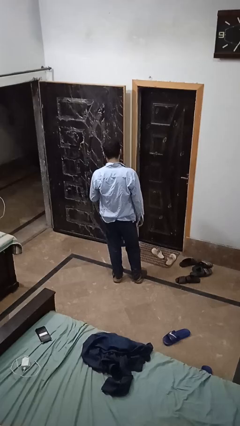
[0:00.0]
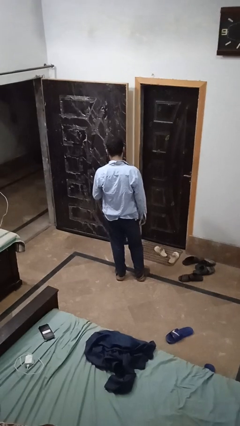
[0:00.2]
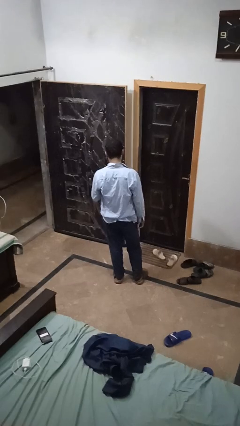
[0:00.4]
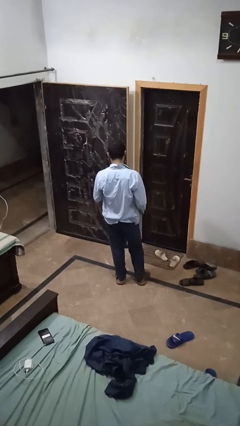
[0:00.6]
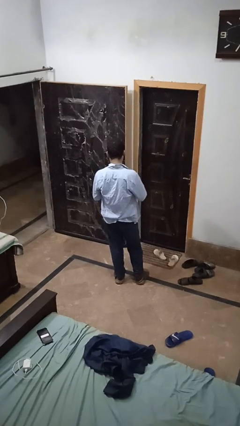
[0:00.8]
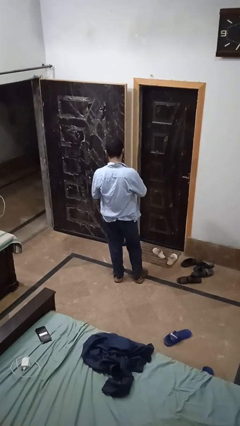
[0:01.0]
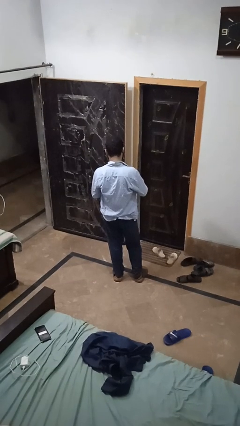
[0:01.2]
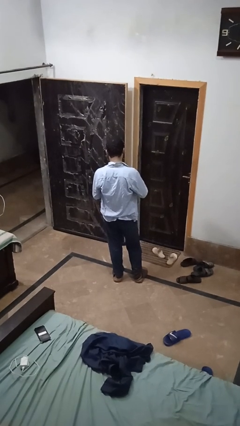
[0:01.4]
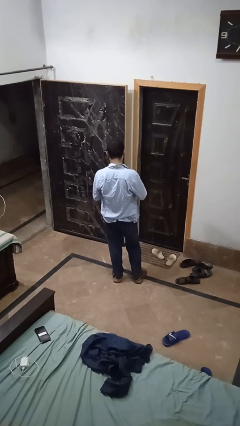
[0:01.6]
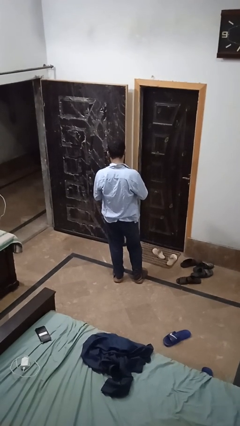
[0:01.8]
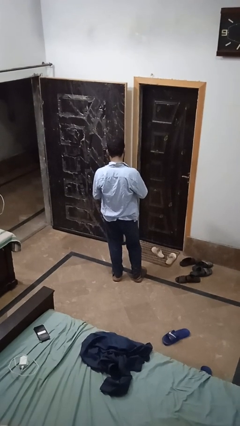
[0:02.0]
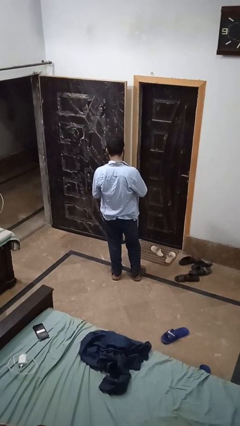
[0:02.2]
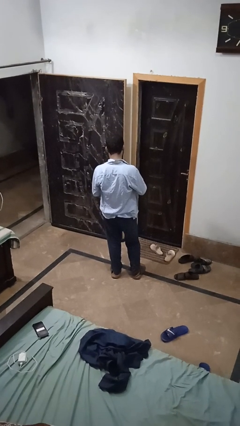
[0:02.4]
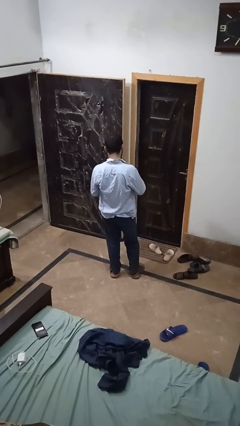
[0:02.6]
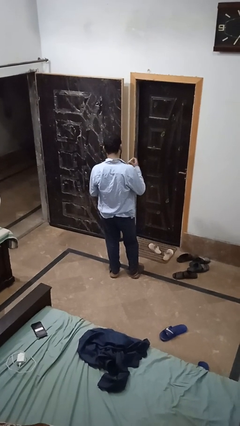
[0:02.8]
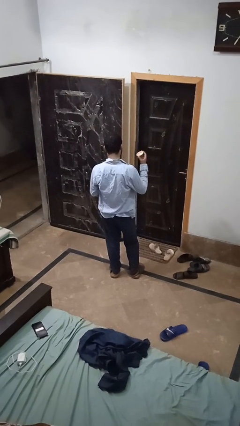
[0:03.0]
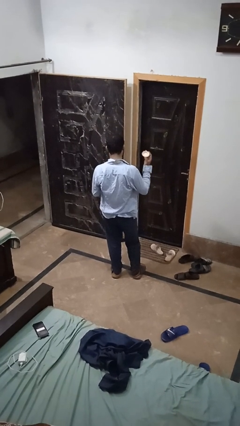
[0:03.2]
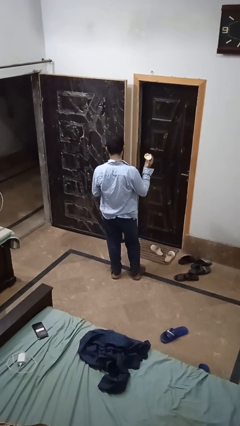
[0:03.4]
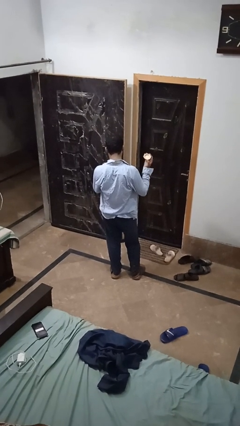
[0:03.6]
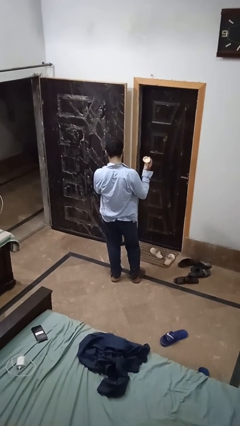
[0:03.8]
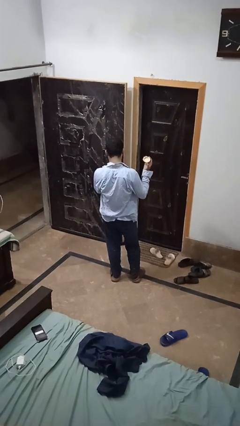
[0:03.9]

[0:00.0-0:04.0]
person opens jar

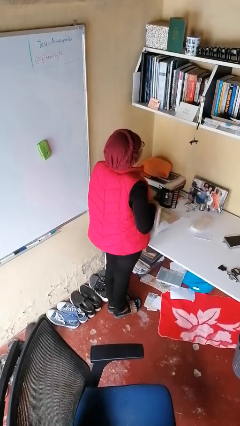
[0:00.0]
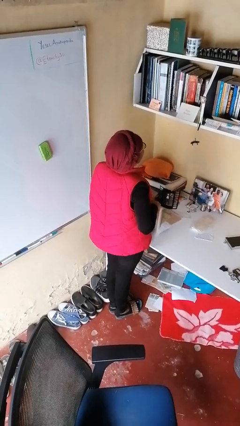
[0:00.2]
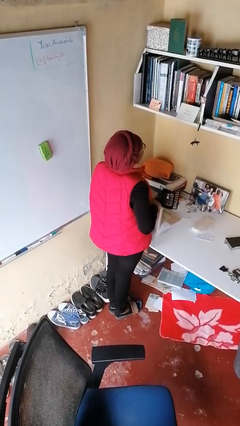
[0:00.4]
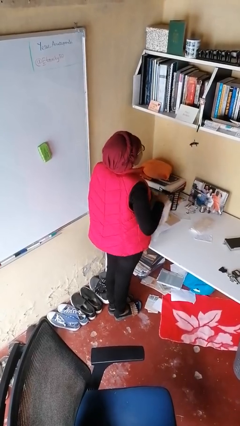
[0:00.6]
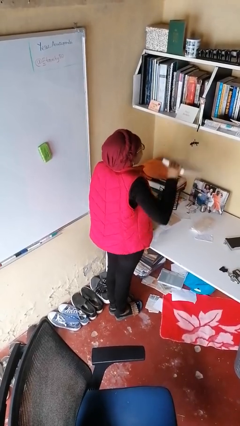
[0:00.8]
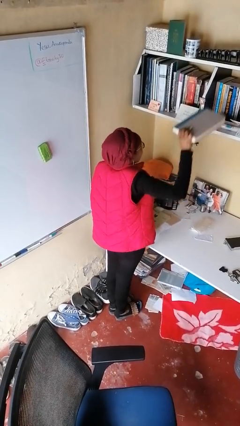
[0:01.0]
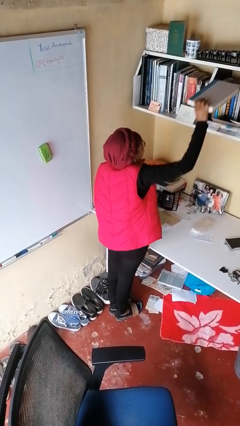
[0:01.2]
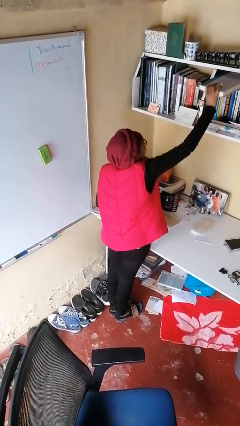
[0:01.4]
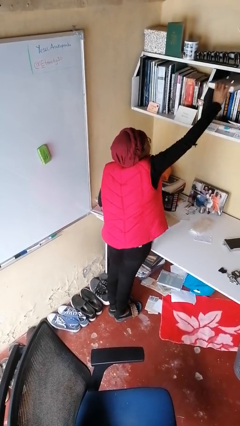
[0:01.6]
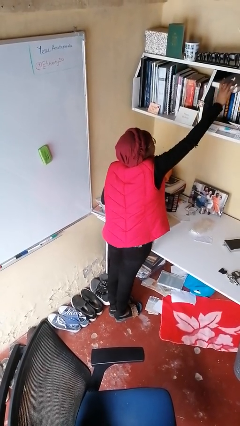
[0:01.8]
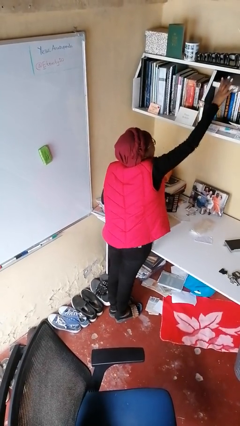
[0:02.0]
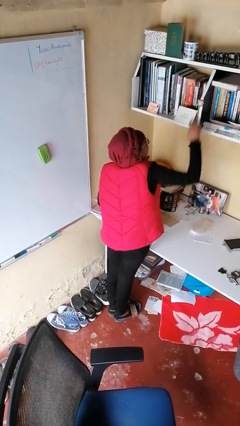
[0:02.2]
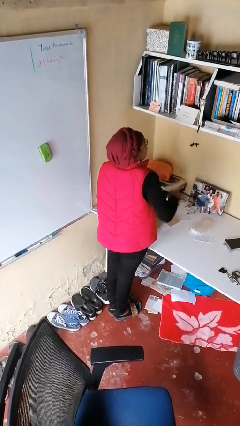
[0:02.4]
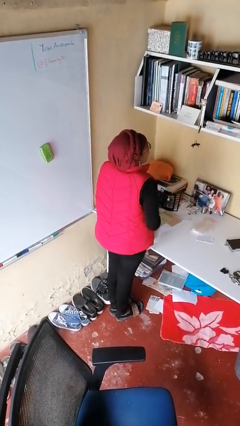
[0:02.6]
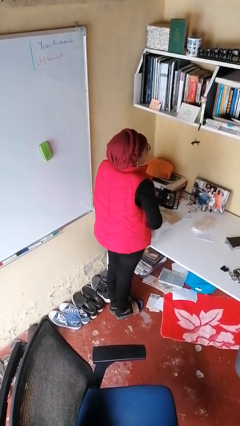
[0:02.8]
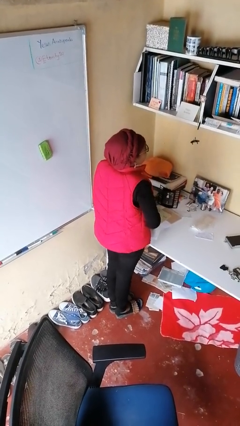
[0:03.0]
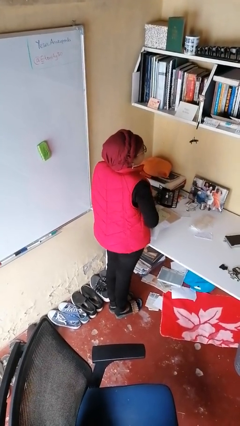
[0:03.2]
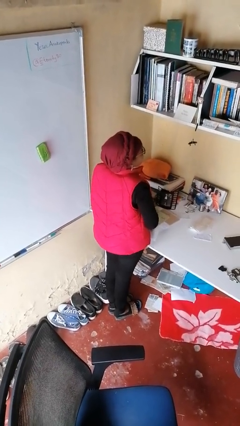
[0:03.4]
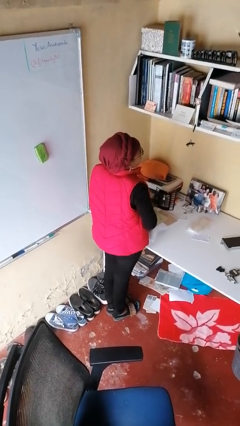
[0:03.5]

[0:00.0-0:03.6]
person puts down object on shelf

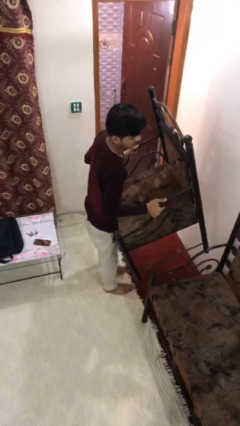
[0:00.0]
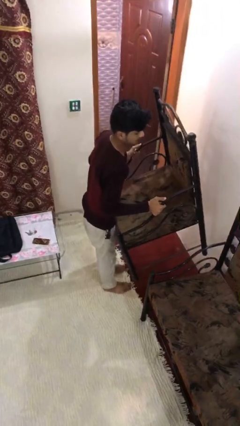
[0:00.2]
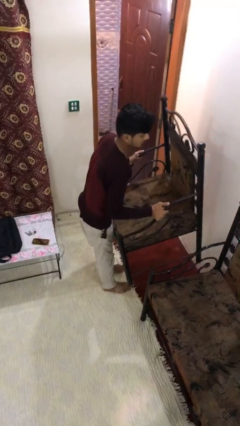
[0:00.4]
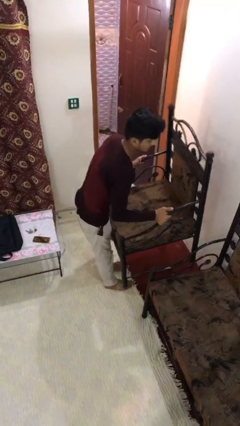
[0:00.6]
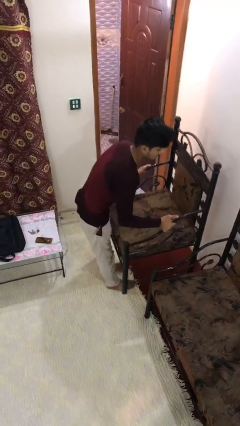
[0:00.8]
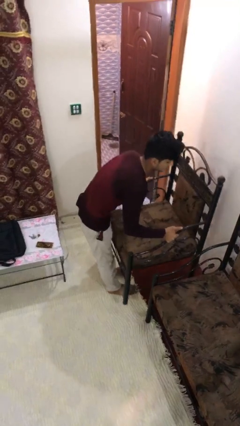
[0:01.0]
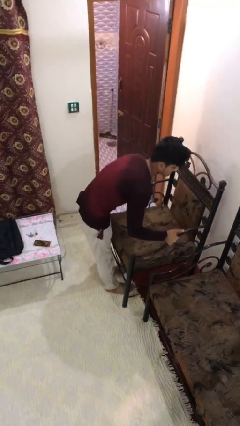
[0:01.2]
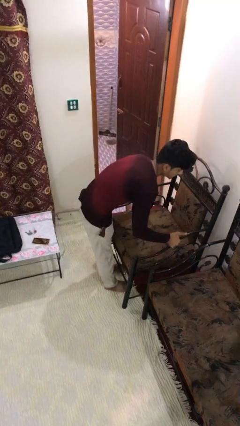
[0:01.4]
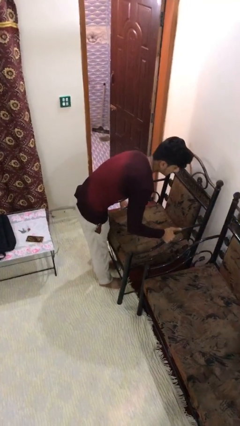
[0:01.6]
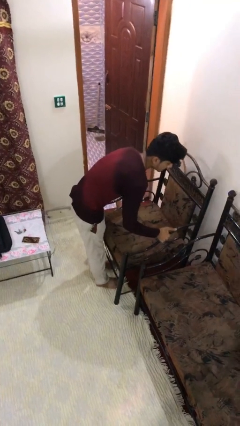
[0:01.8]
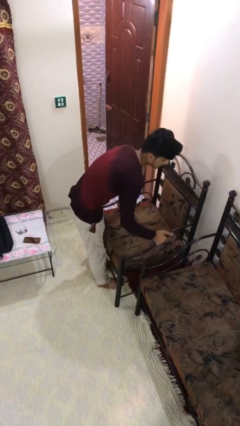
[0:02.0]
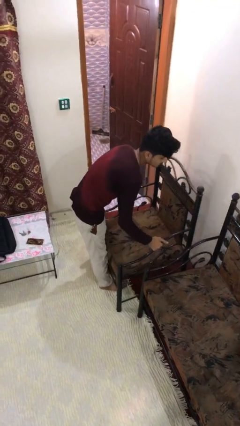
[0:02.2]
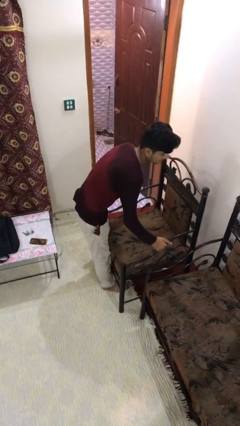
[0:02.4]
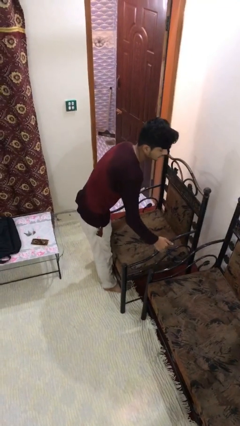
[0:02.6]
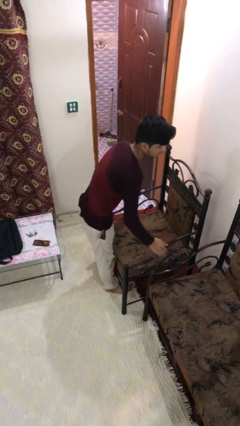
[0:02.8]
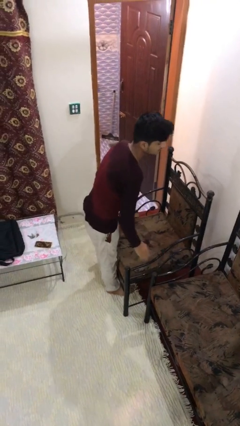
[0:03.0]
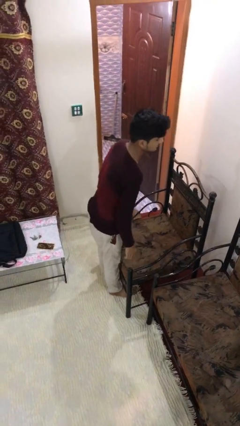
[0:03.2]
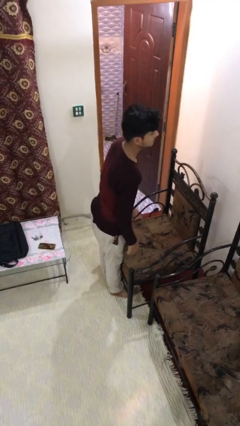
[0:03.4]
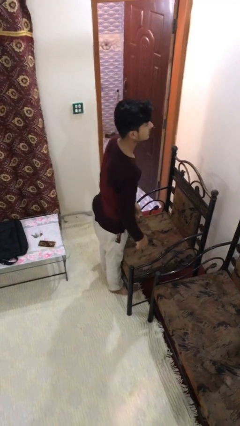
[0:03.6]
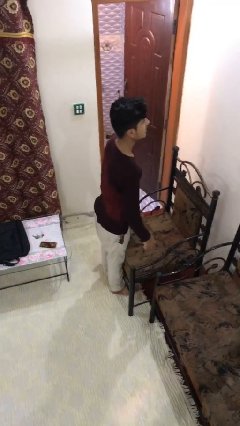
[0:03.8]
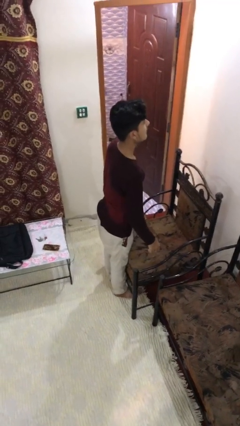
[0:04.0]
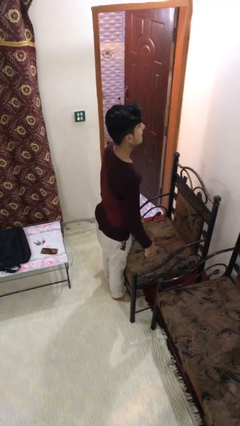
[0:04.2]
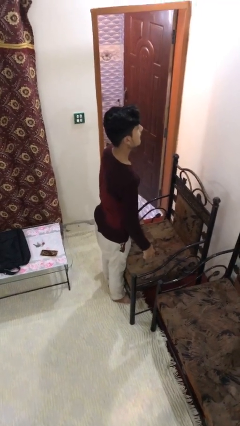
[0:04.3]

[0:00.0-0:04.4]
person puts down object on floor

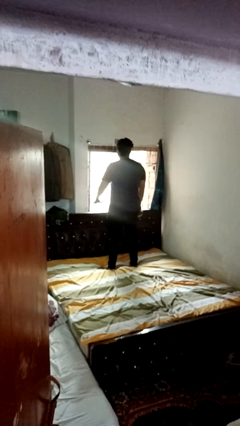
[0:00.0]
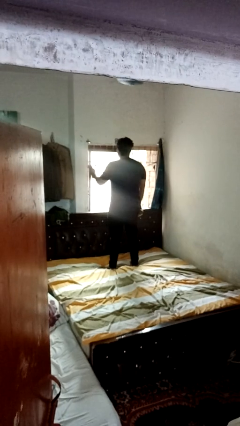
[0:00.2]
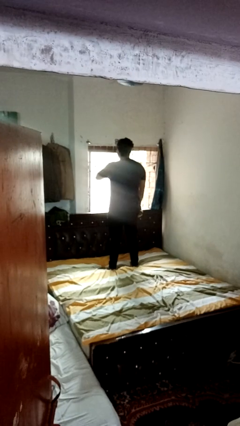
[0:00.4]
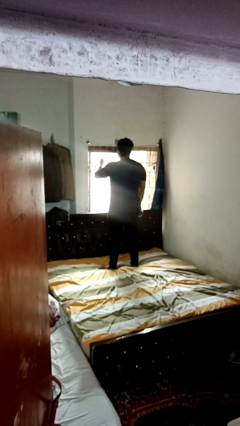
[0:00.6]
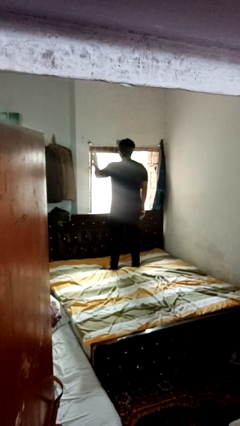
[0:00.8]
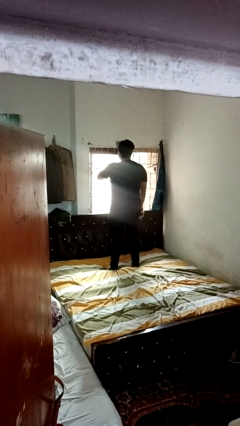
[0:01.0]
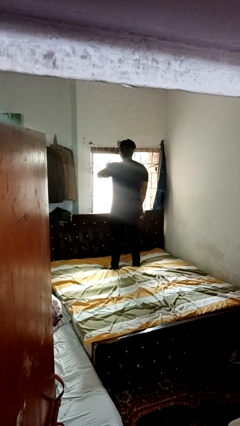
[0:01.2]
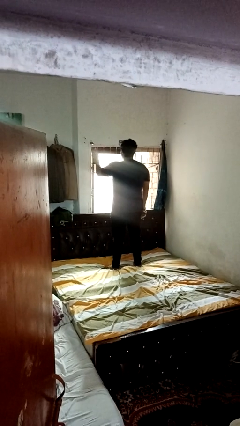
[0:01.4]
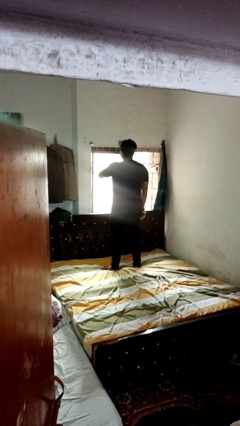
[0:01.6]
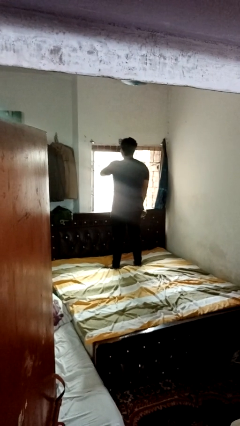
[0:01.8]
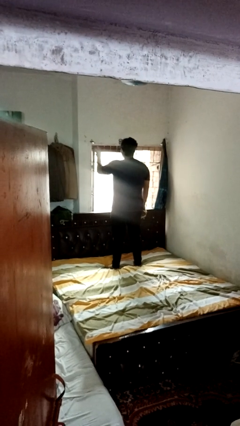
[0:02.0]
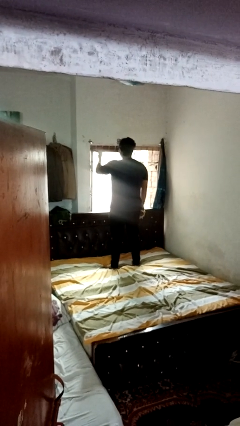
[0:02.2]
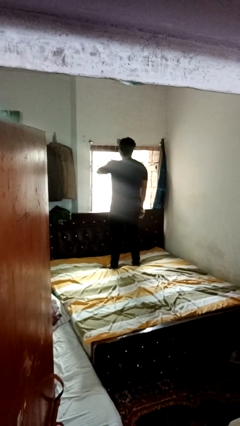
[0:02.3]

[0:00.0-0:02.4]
person sprays from bottle

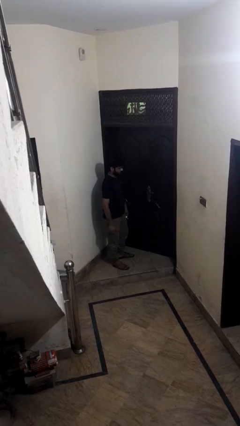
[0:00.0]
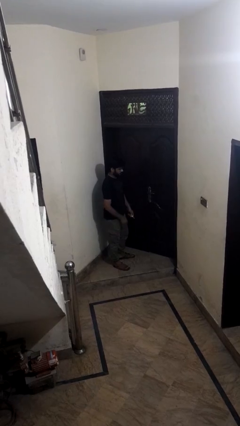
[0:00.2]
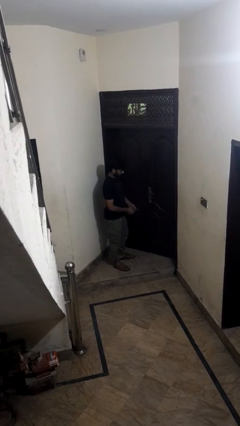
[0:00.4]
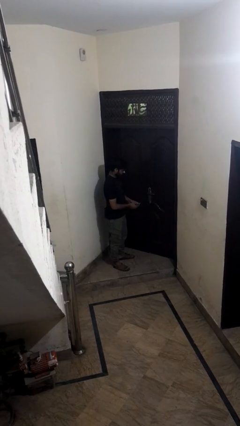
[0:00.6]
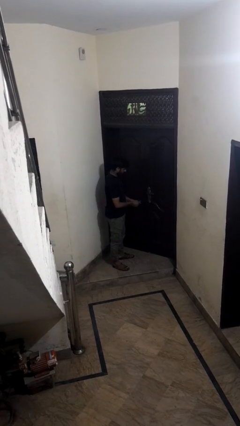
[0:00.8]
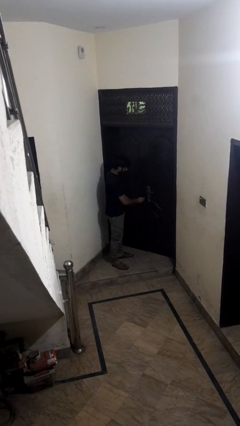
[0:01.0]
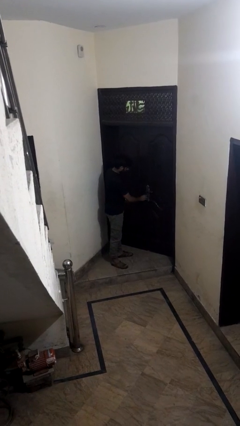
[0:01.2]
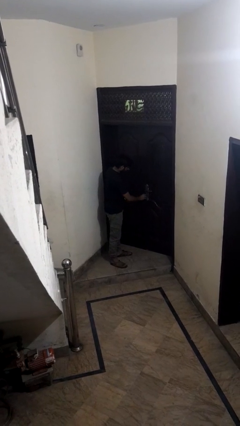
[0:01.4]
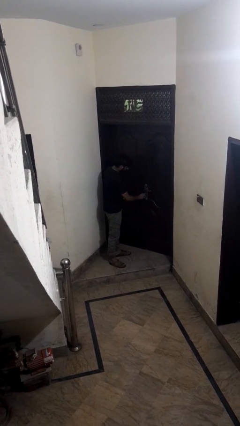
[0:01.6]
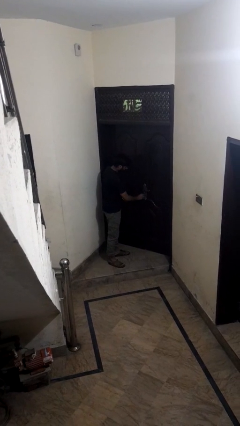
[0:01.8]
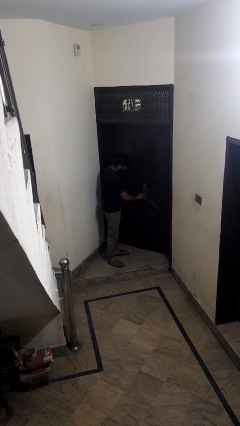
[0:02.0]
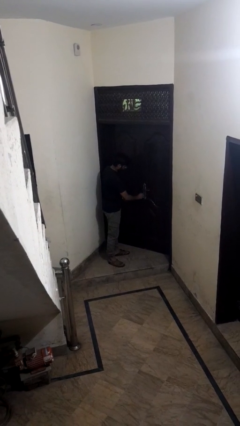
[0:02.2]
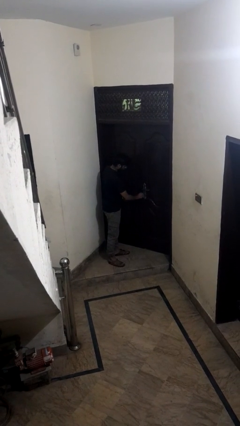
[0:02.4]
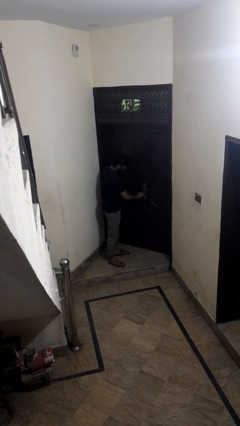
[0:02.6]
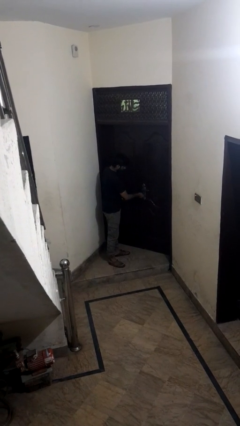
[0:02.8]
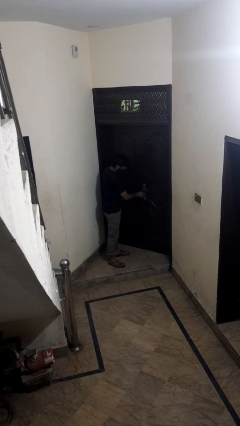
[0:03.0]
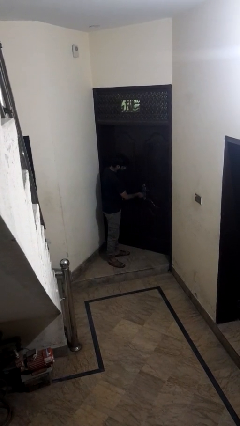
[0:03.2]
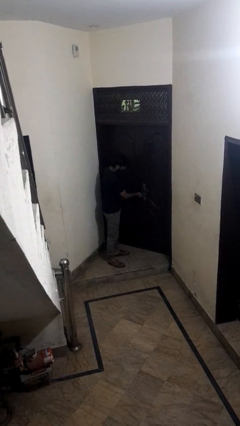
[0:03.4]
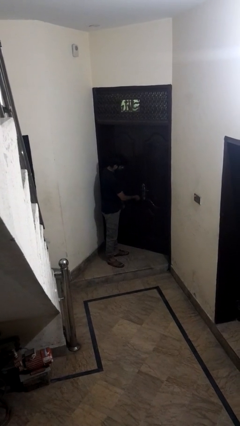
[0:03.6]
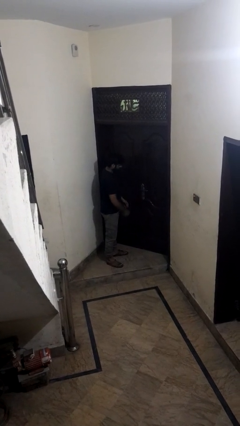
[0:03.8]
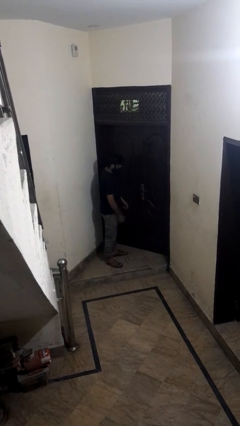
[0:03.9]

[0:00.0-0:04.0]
person unlocks door with keys
